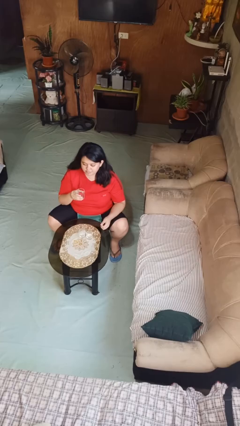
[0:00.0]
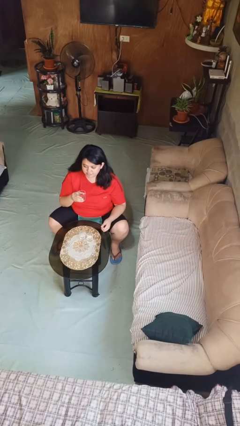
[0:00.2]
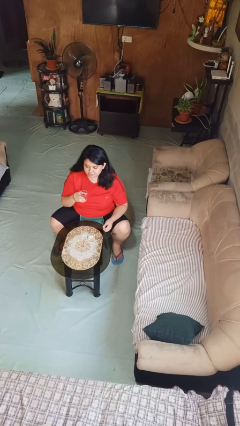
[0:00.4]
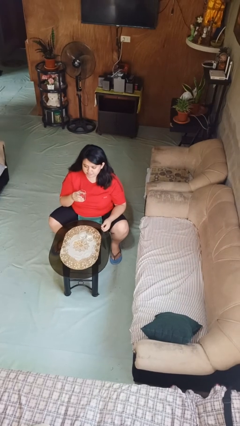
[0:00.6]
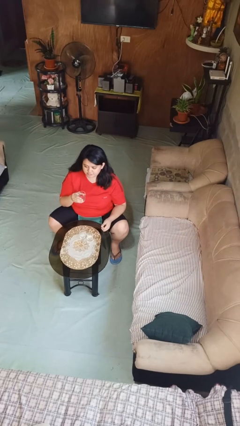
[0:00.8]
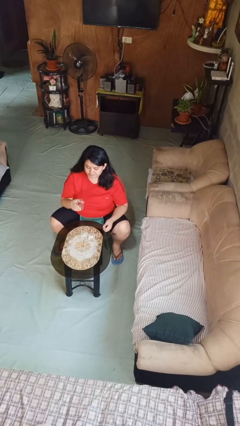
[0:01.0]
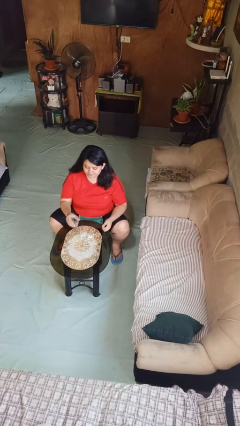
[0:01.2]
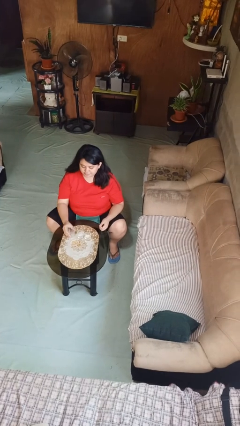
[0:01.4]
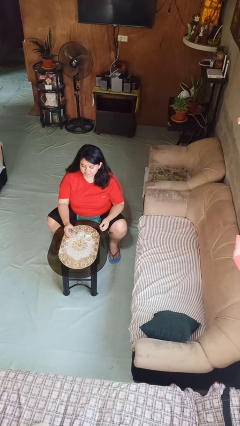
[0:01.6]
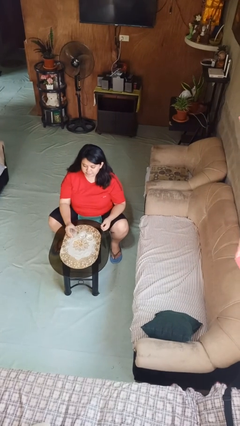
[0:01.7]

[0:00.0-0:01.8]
person puts down object on table

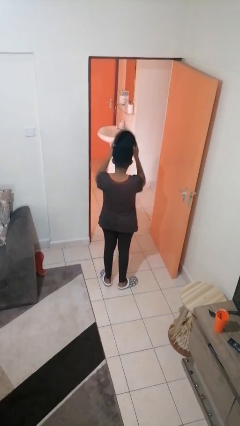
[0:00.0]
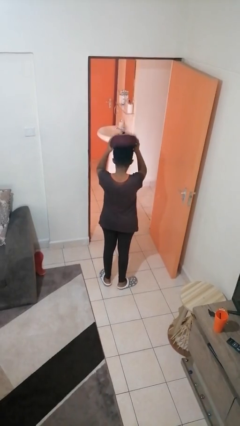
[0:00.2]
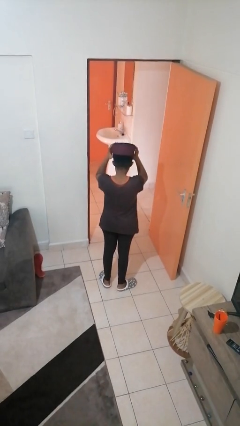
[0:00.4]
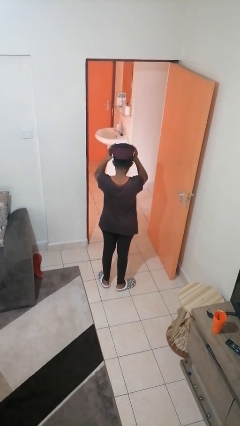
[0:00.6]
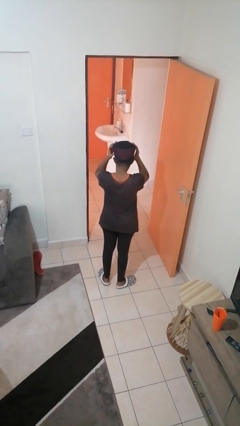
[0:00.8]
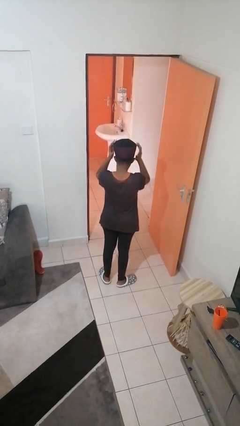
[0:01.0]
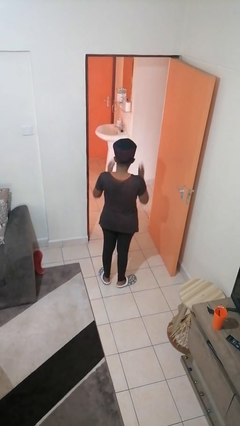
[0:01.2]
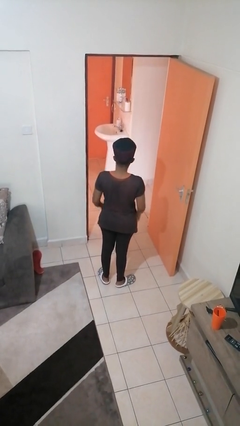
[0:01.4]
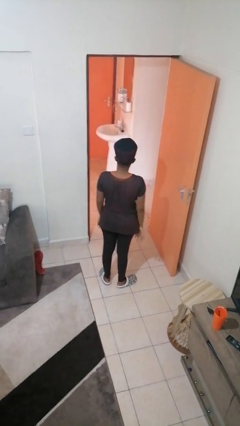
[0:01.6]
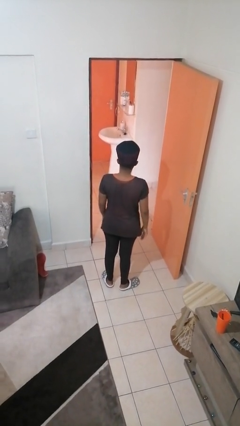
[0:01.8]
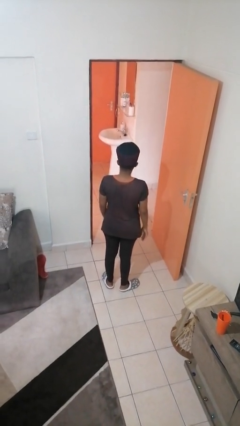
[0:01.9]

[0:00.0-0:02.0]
person puts on hat

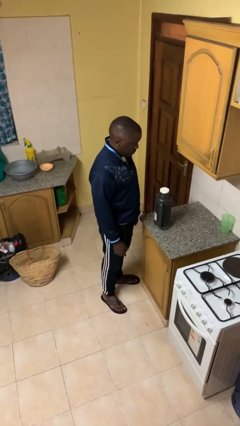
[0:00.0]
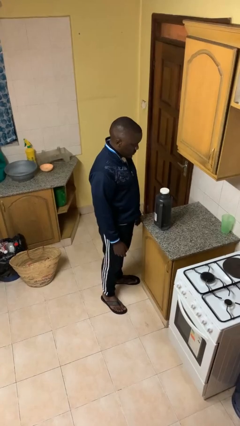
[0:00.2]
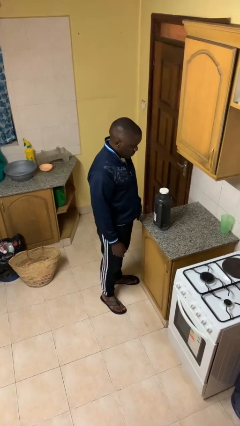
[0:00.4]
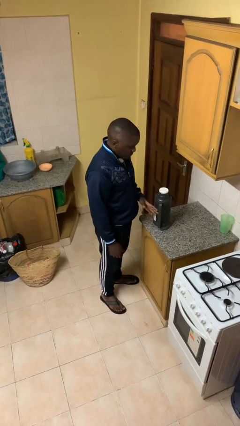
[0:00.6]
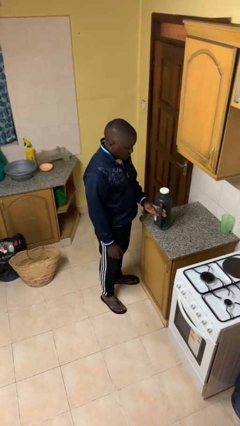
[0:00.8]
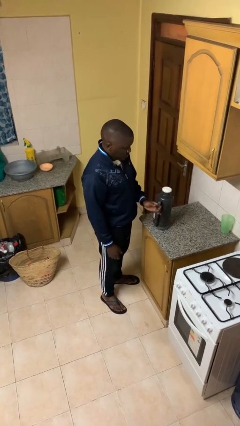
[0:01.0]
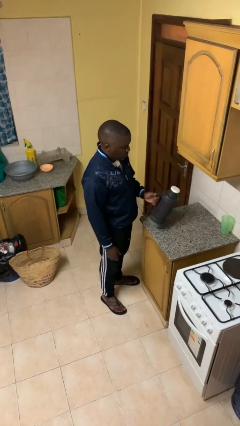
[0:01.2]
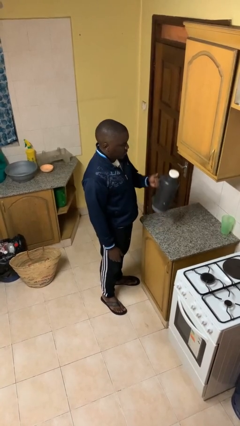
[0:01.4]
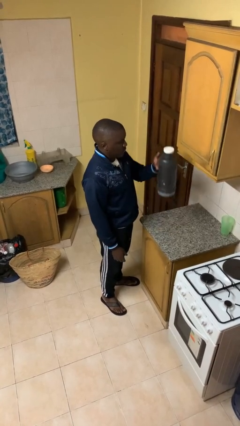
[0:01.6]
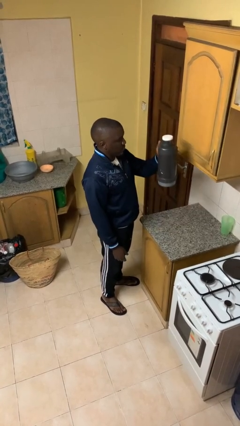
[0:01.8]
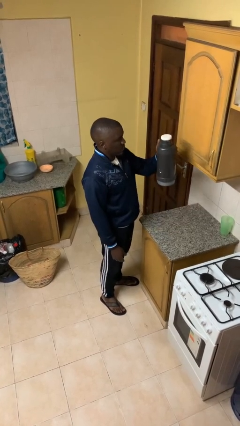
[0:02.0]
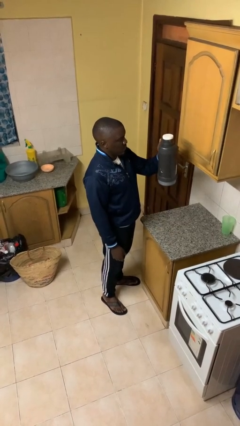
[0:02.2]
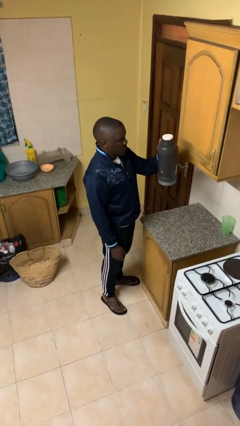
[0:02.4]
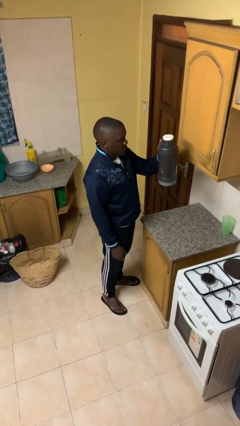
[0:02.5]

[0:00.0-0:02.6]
person picks up object from countertop

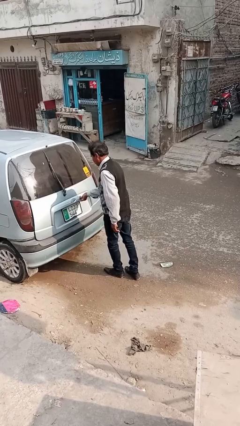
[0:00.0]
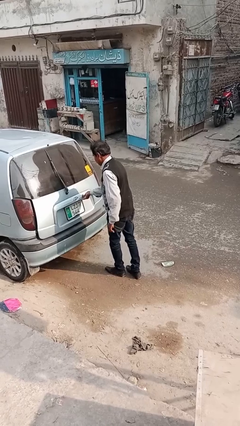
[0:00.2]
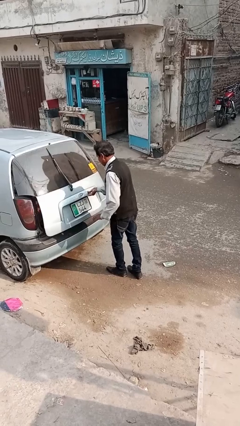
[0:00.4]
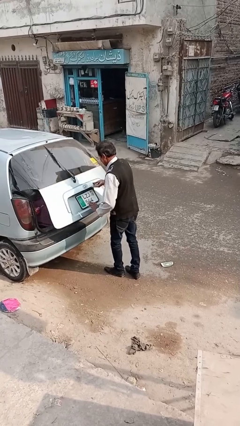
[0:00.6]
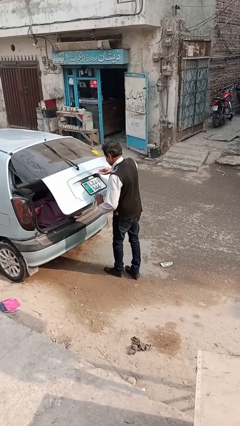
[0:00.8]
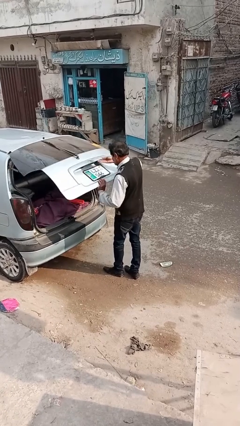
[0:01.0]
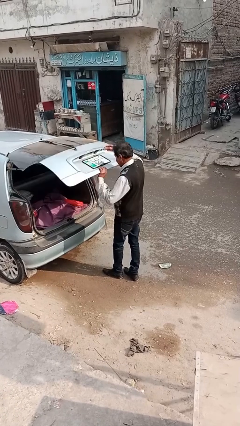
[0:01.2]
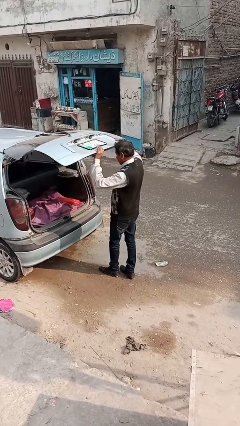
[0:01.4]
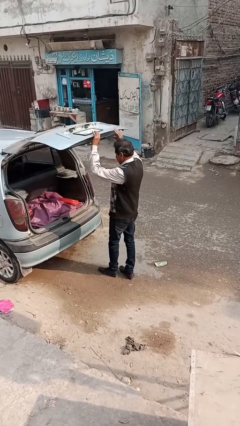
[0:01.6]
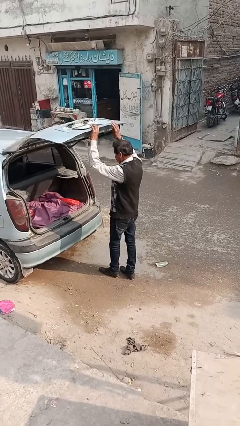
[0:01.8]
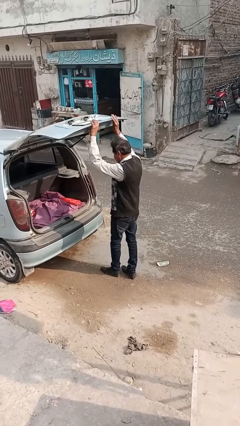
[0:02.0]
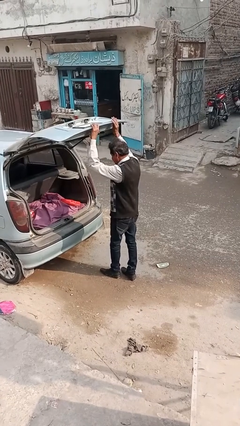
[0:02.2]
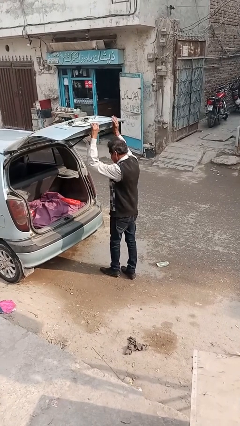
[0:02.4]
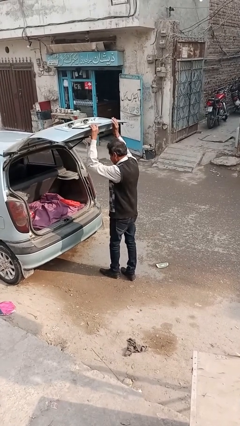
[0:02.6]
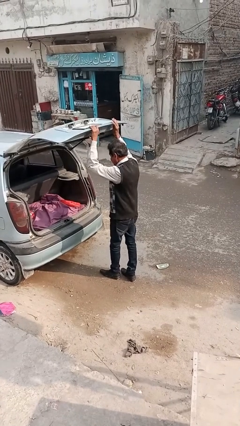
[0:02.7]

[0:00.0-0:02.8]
person opens car trunk

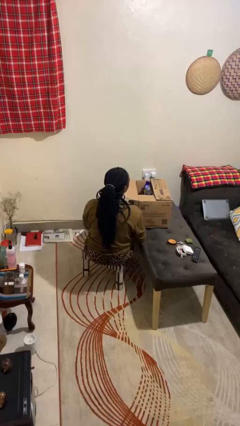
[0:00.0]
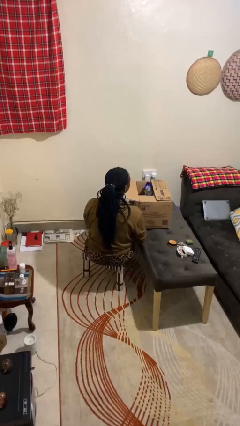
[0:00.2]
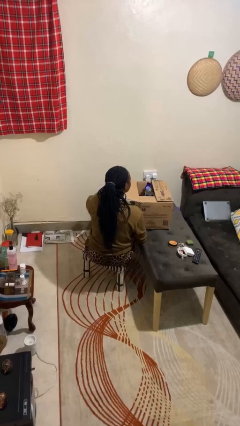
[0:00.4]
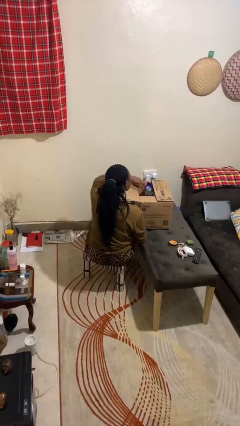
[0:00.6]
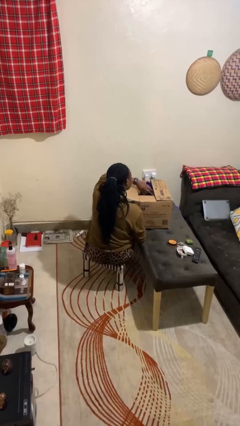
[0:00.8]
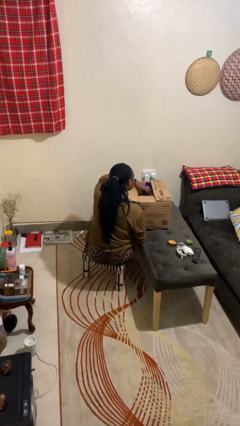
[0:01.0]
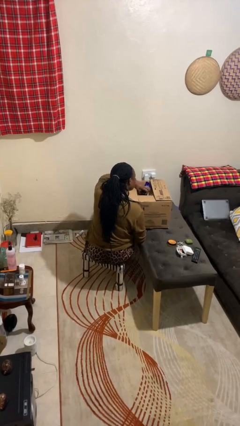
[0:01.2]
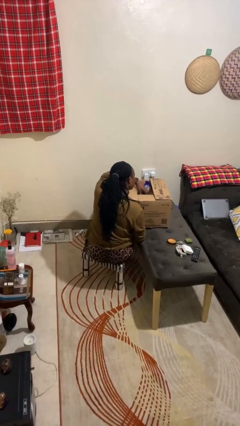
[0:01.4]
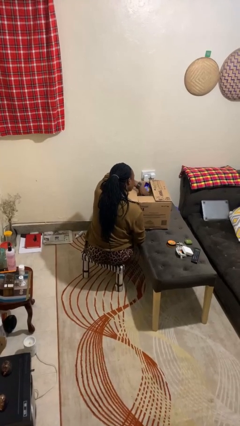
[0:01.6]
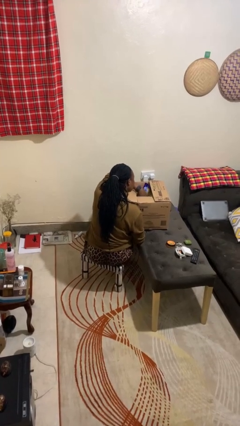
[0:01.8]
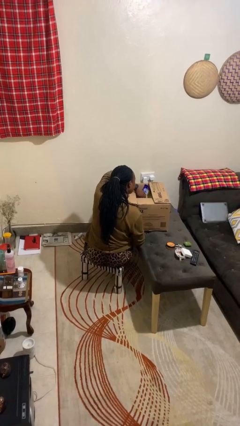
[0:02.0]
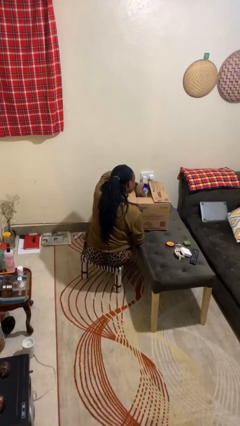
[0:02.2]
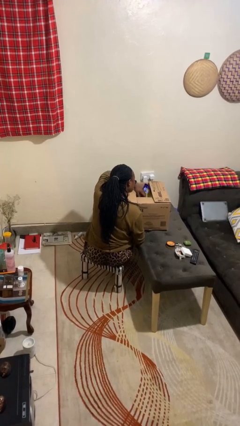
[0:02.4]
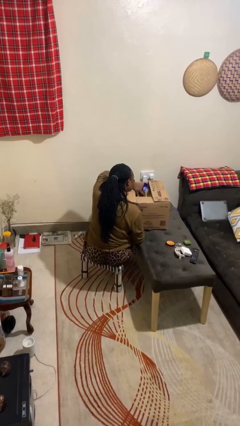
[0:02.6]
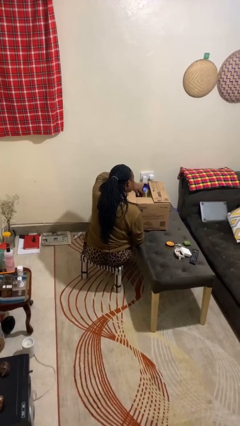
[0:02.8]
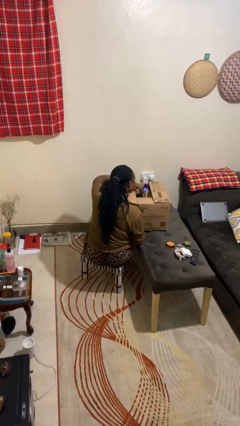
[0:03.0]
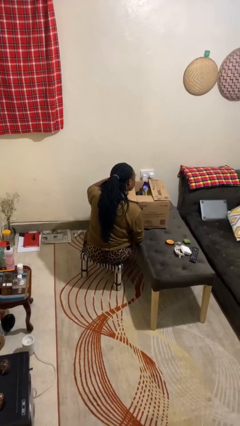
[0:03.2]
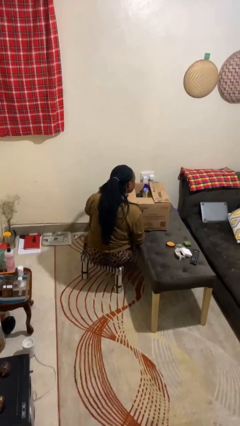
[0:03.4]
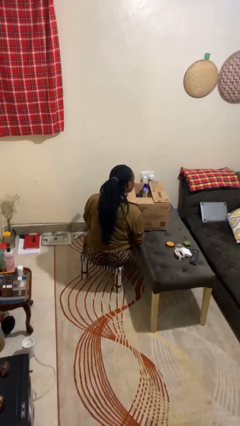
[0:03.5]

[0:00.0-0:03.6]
person searches in box

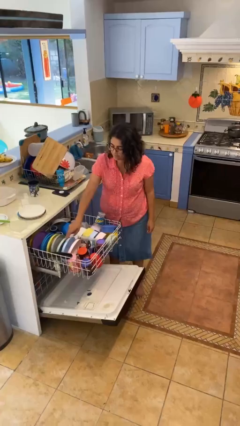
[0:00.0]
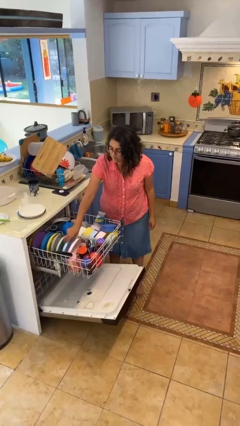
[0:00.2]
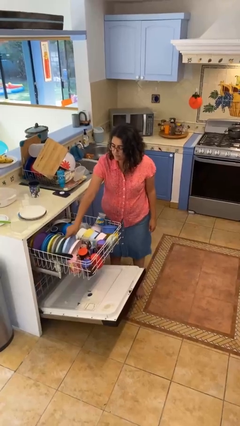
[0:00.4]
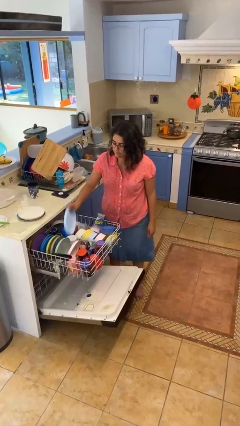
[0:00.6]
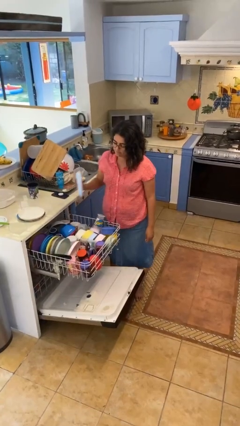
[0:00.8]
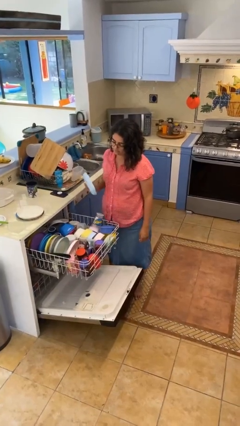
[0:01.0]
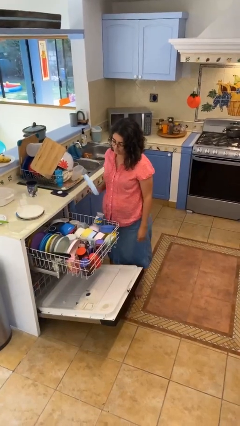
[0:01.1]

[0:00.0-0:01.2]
person unloads dishwasher

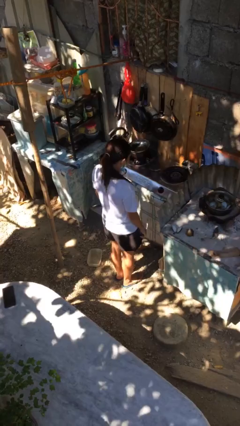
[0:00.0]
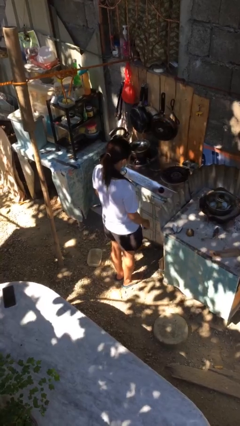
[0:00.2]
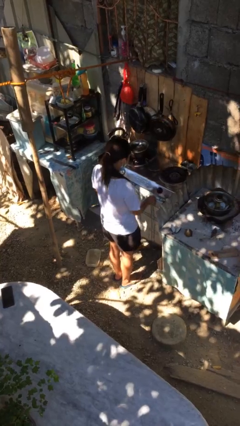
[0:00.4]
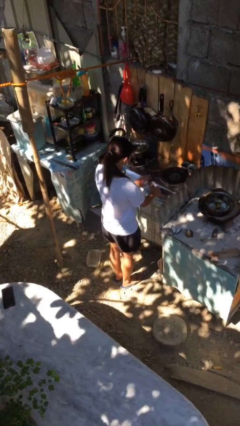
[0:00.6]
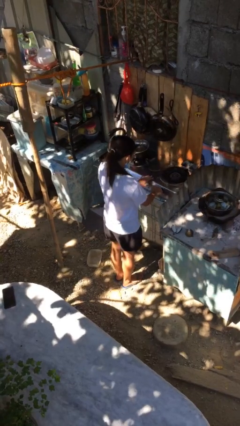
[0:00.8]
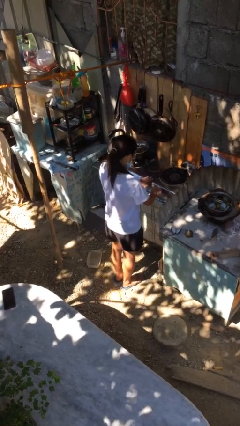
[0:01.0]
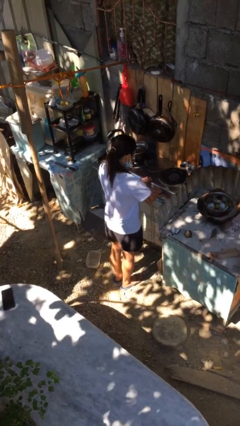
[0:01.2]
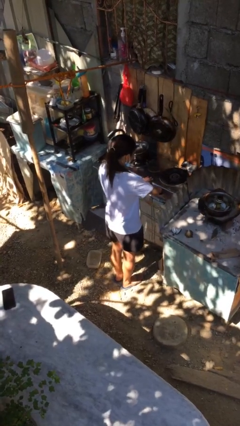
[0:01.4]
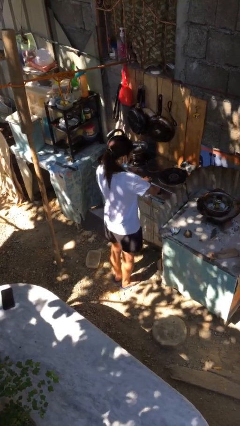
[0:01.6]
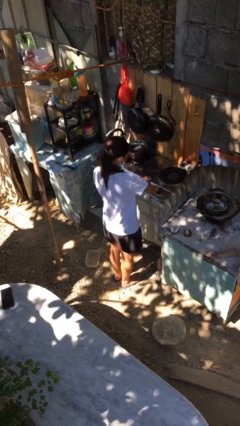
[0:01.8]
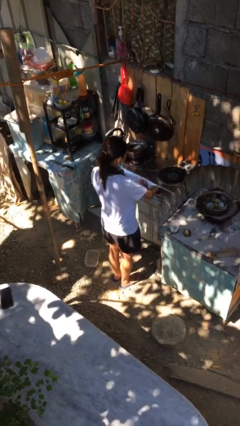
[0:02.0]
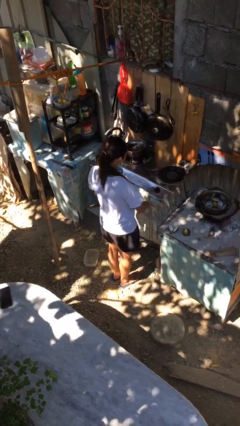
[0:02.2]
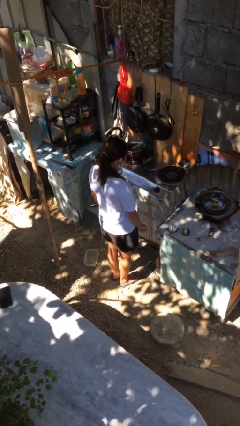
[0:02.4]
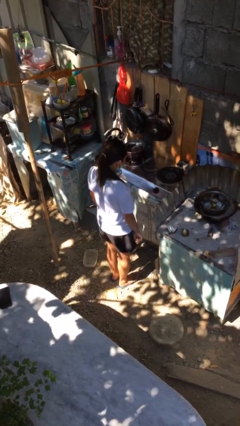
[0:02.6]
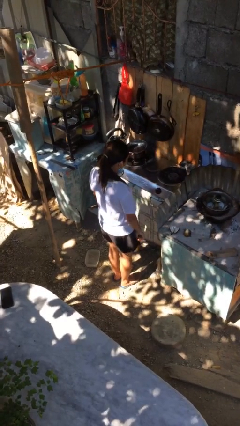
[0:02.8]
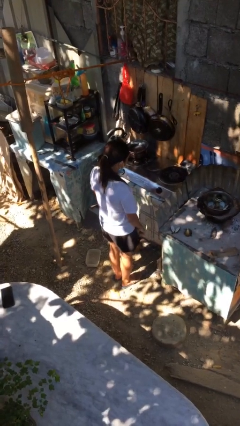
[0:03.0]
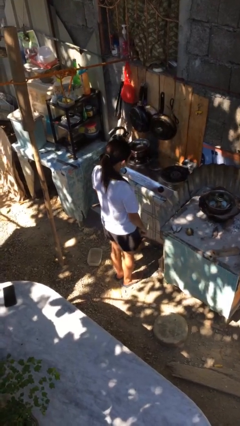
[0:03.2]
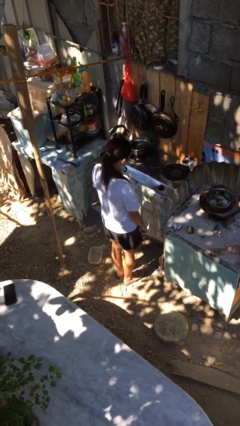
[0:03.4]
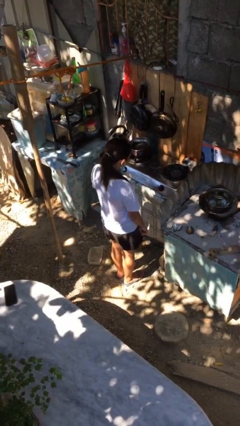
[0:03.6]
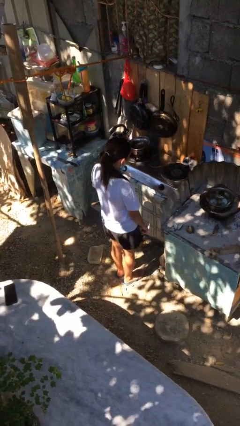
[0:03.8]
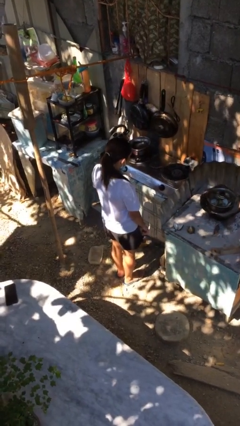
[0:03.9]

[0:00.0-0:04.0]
person turns on stovetop
